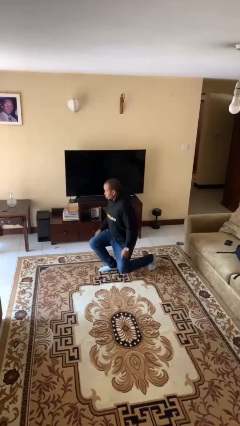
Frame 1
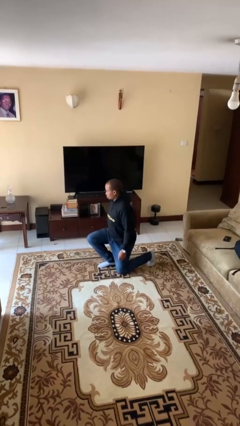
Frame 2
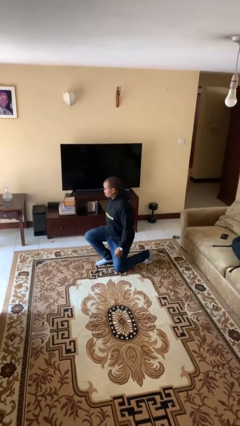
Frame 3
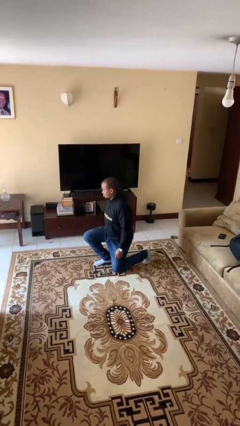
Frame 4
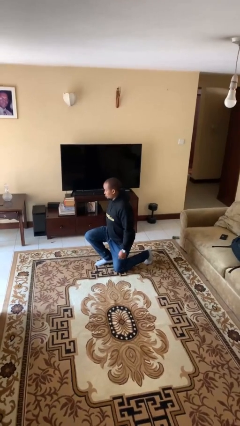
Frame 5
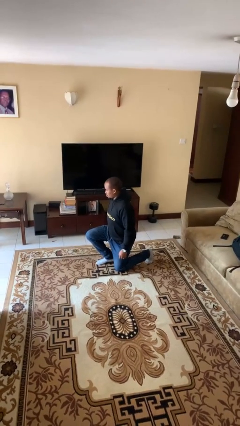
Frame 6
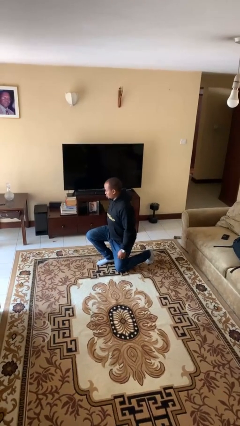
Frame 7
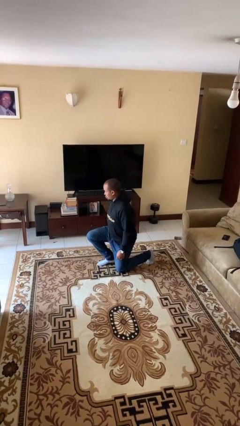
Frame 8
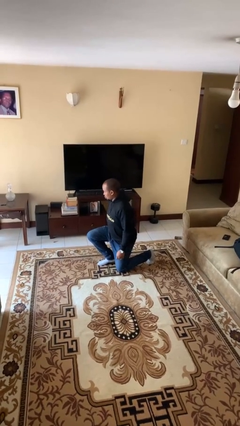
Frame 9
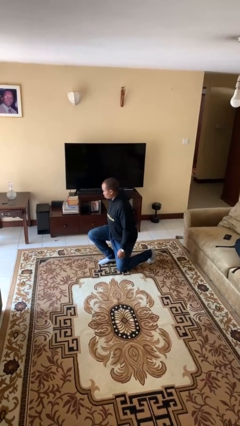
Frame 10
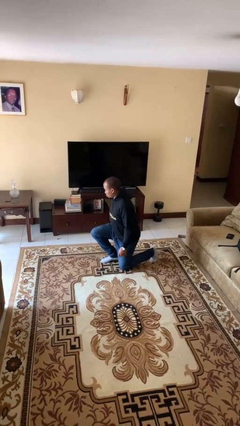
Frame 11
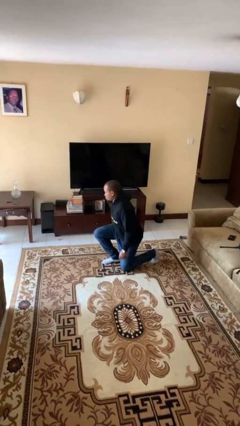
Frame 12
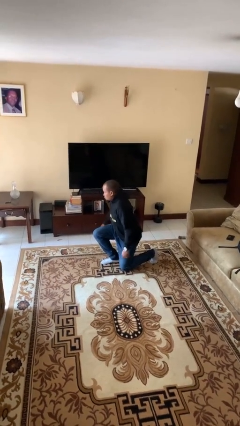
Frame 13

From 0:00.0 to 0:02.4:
person kneels

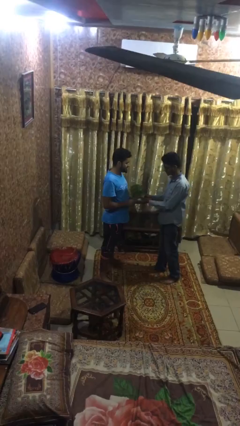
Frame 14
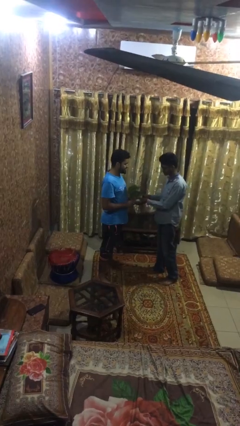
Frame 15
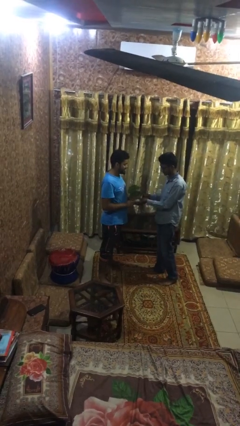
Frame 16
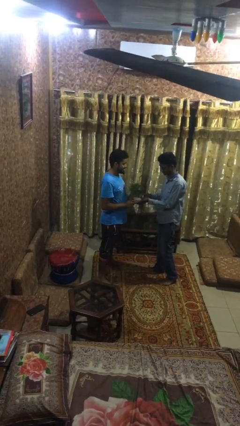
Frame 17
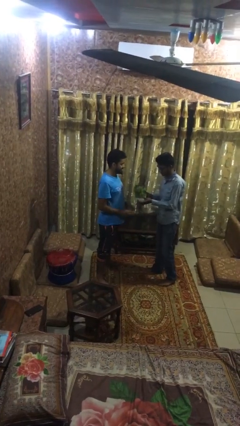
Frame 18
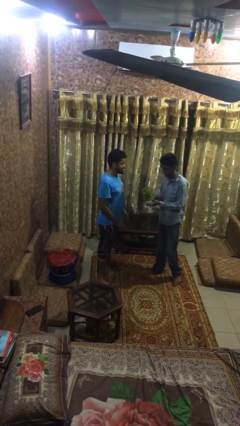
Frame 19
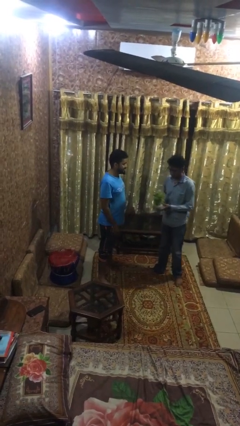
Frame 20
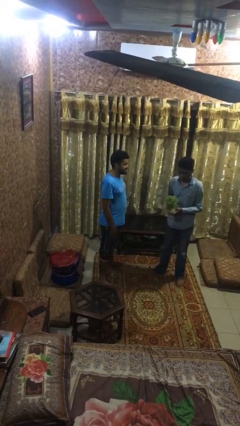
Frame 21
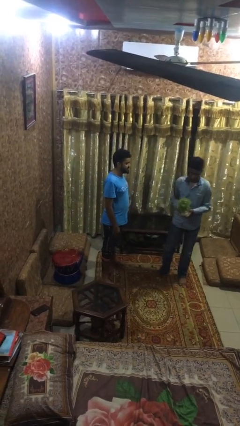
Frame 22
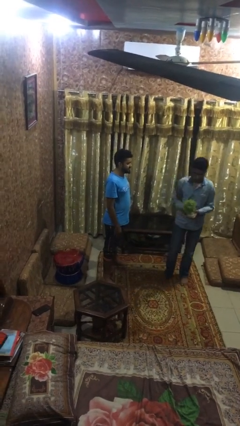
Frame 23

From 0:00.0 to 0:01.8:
person transfers object to person

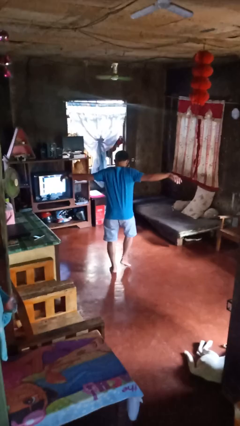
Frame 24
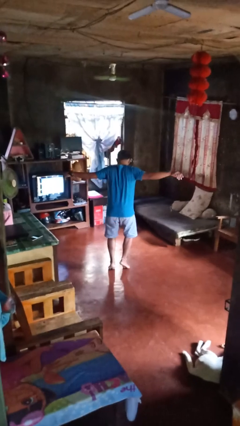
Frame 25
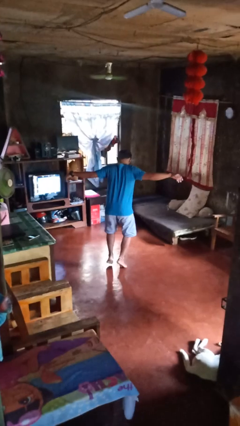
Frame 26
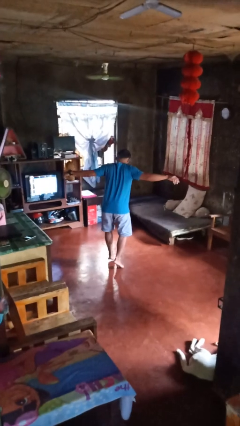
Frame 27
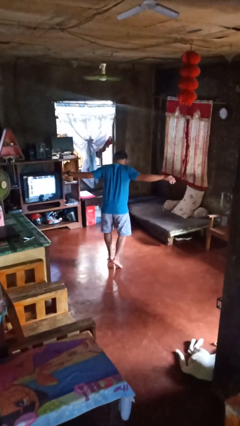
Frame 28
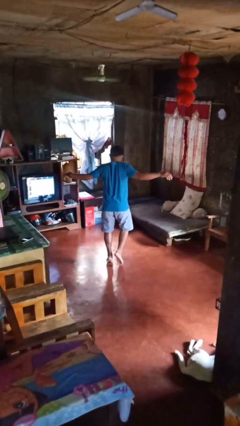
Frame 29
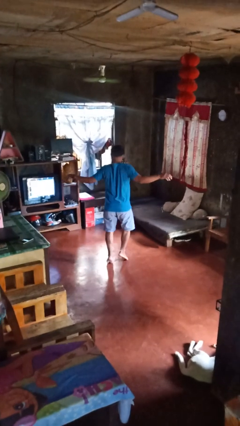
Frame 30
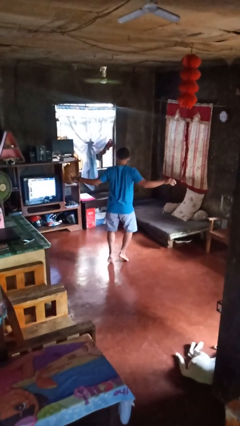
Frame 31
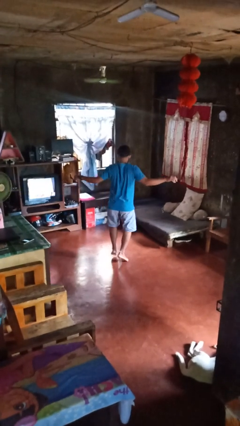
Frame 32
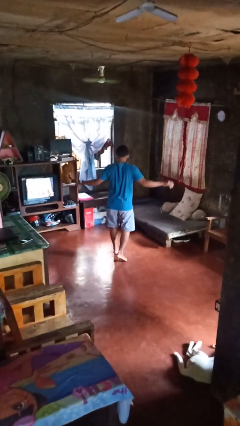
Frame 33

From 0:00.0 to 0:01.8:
person walks tiptoe

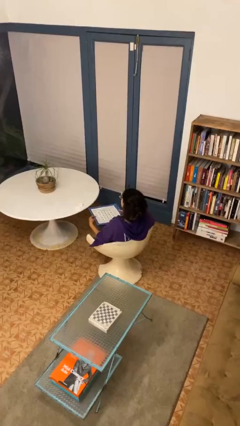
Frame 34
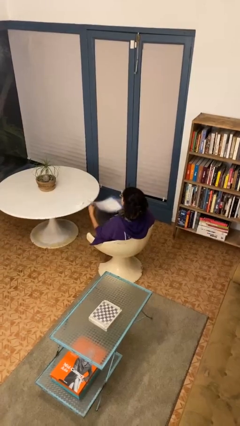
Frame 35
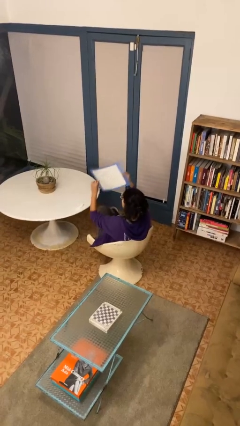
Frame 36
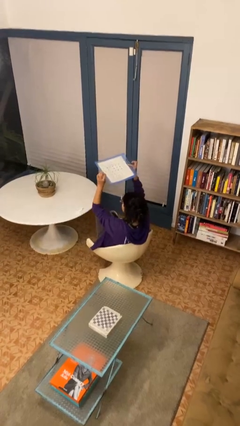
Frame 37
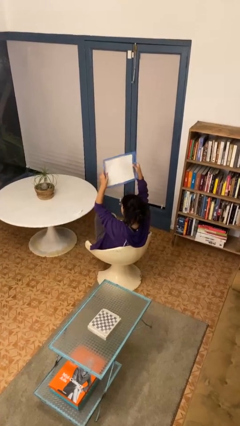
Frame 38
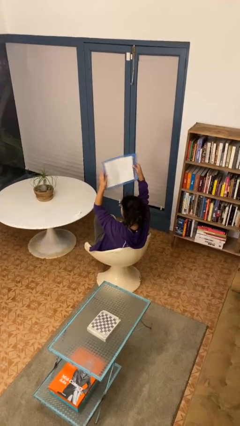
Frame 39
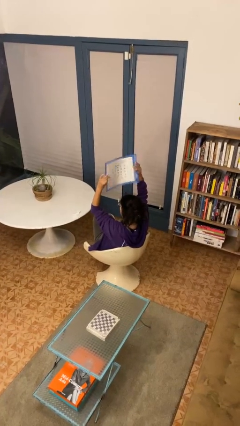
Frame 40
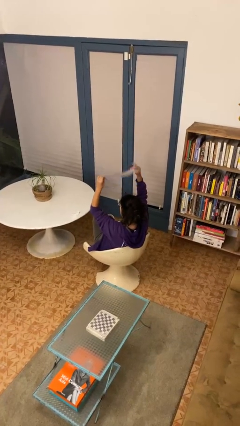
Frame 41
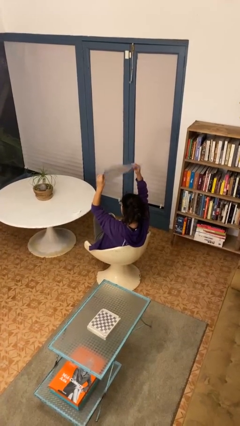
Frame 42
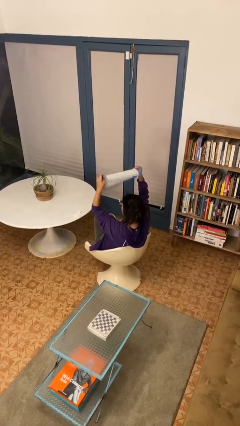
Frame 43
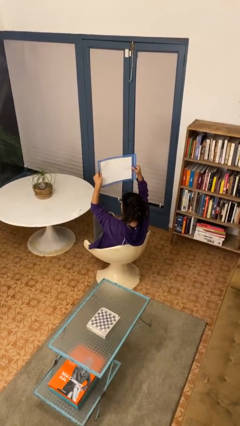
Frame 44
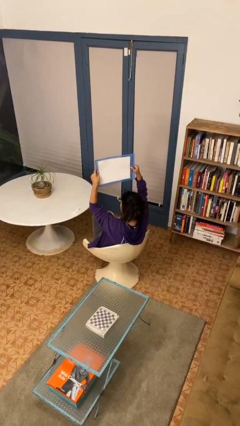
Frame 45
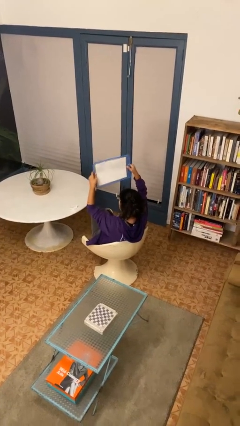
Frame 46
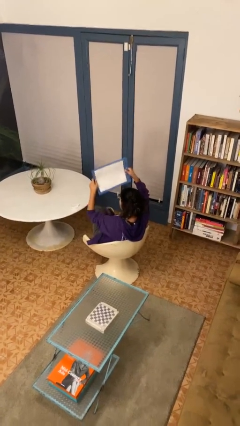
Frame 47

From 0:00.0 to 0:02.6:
person holds object above head

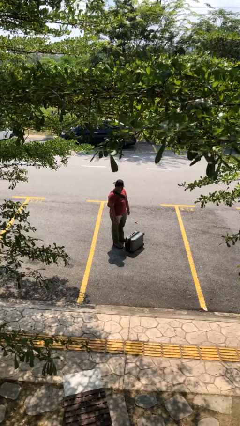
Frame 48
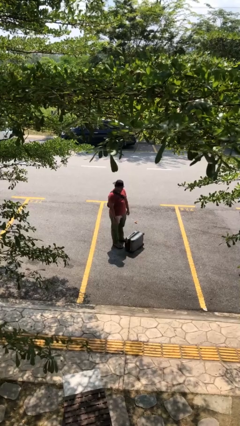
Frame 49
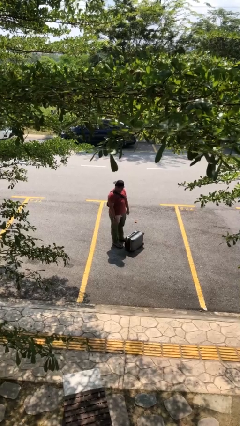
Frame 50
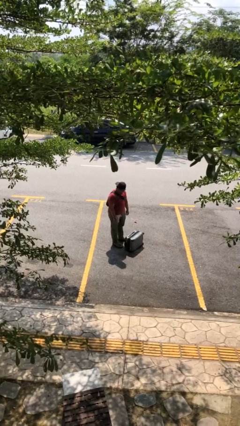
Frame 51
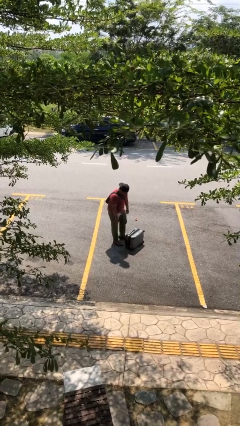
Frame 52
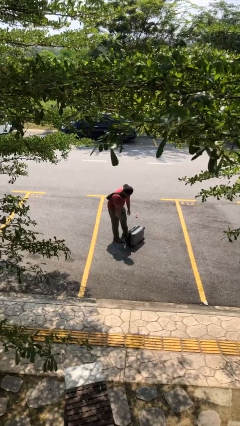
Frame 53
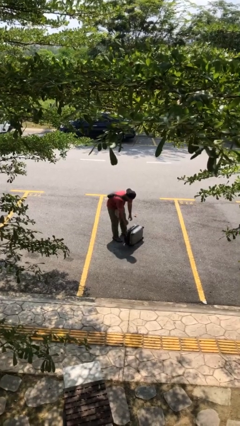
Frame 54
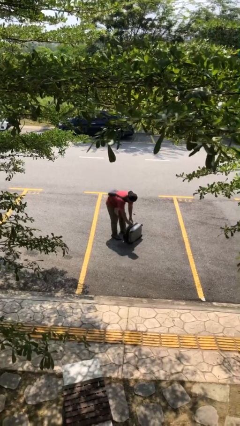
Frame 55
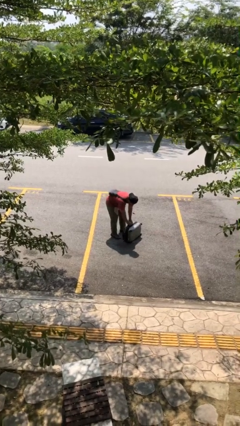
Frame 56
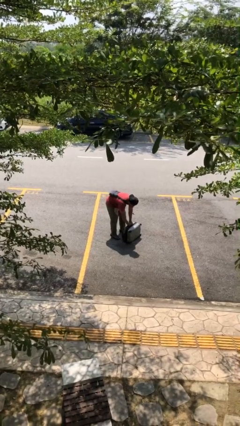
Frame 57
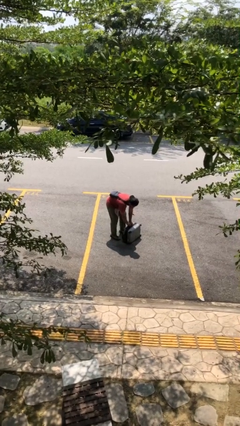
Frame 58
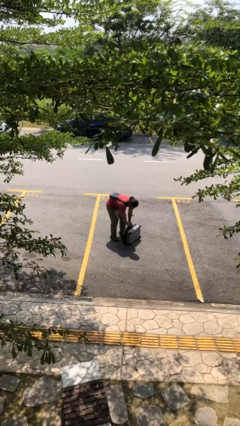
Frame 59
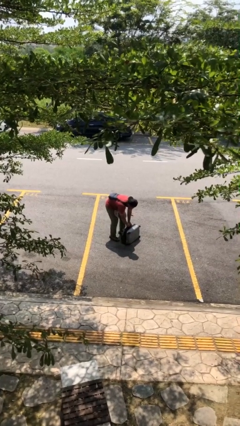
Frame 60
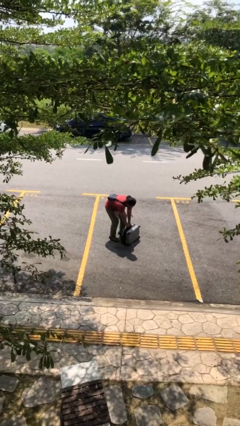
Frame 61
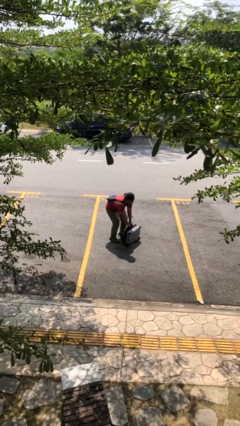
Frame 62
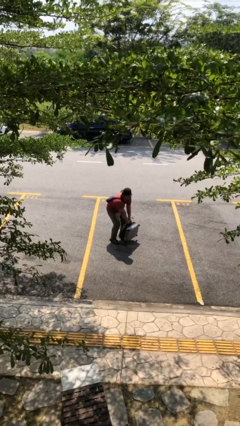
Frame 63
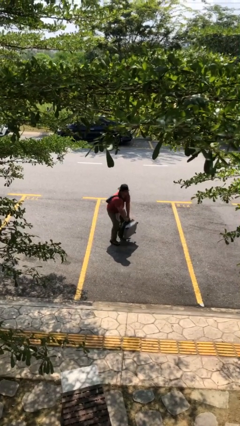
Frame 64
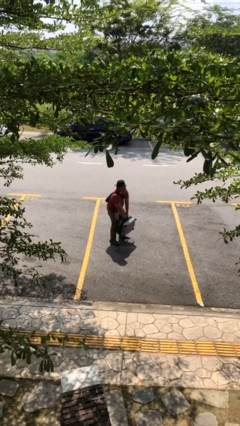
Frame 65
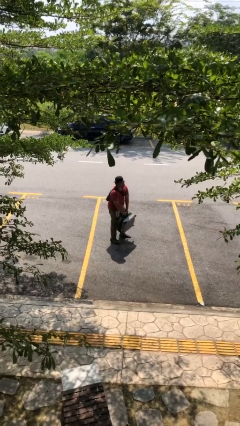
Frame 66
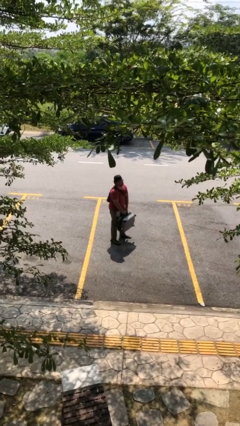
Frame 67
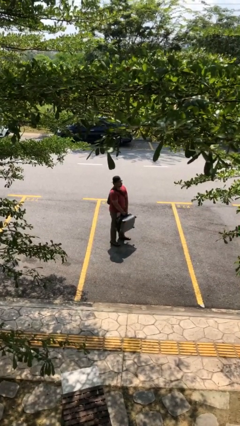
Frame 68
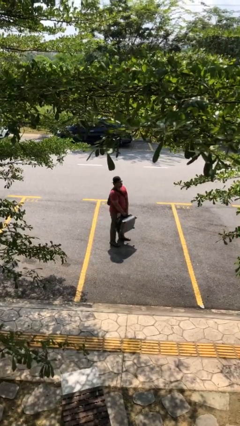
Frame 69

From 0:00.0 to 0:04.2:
person picks up object from floor

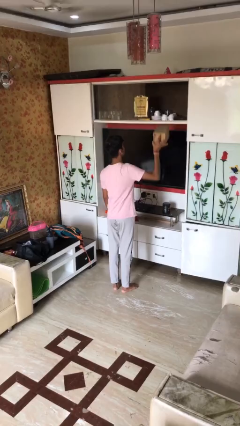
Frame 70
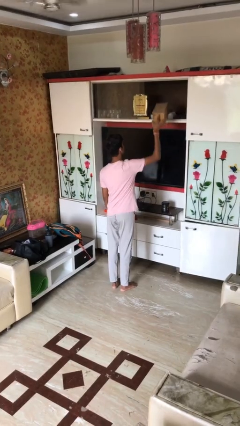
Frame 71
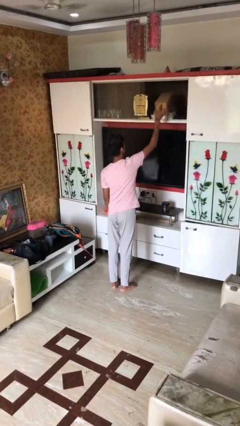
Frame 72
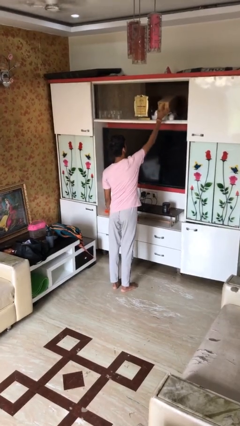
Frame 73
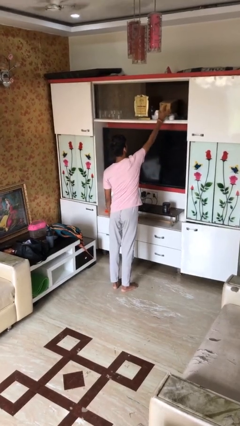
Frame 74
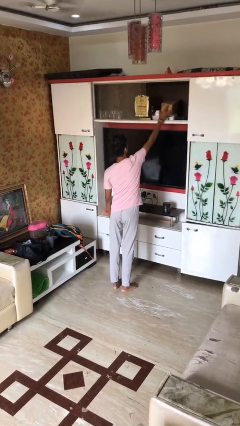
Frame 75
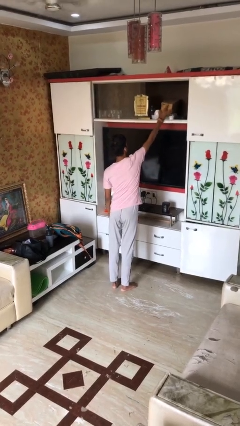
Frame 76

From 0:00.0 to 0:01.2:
person puts down object on shelf

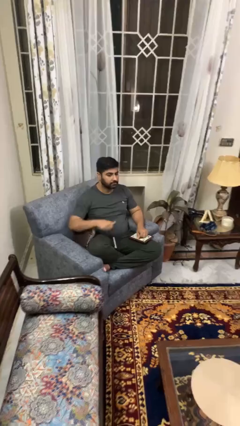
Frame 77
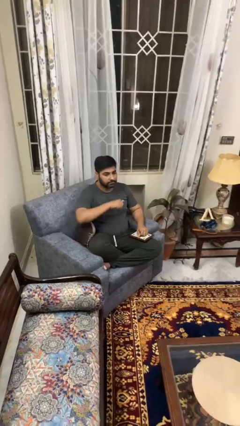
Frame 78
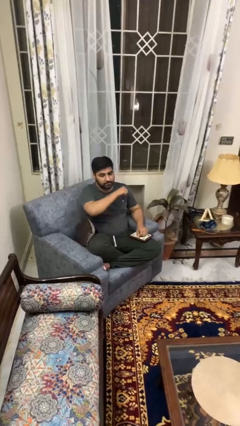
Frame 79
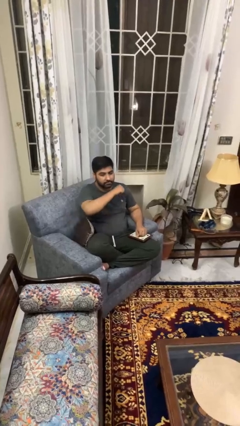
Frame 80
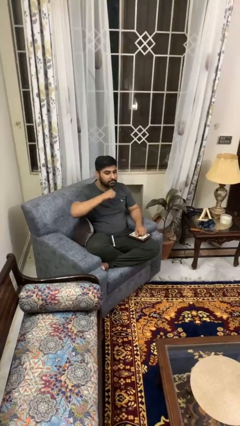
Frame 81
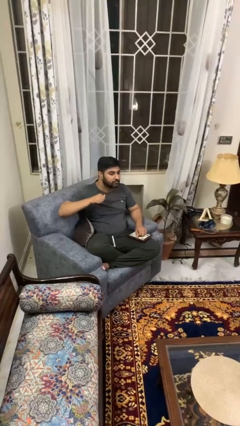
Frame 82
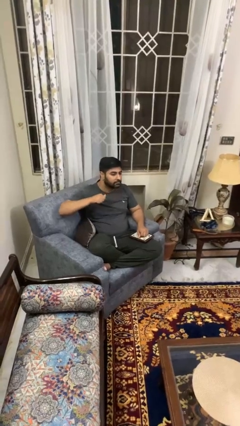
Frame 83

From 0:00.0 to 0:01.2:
person gestures cut

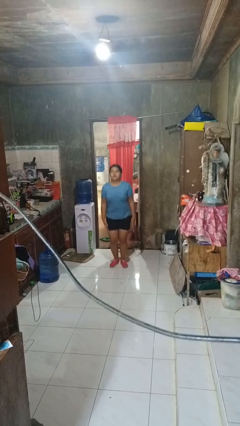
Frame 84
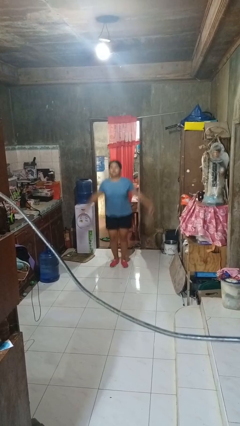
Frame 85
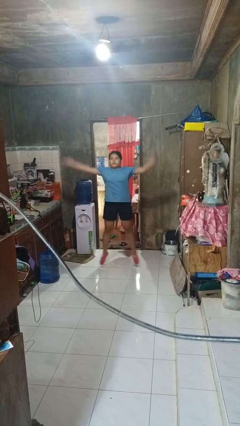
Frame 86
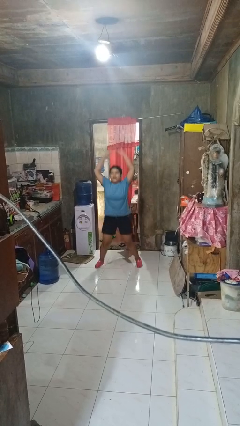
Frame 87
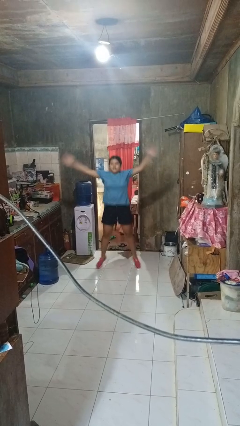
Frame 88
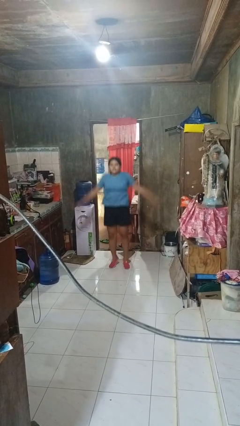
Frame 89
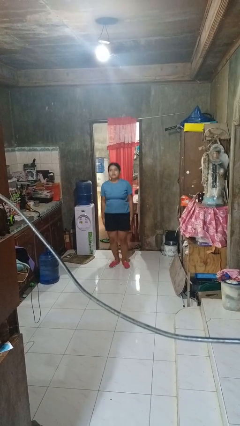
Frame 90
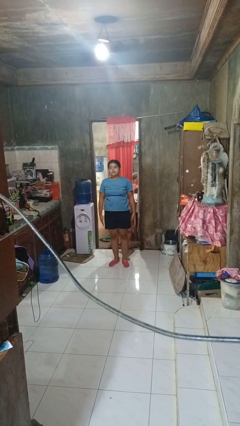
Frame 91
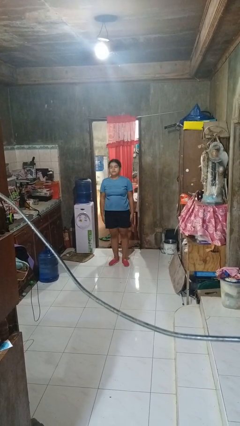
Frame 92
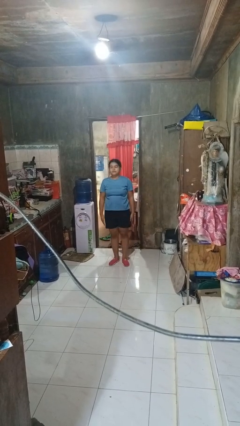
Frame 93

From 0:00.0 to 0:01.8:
person exercises with jumping jacks
